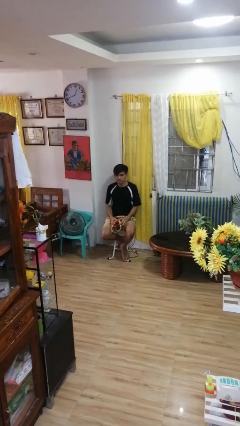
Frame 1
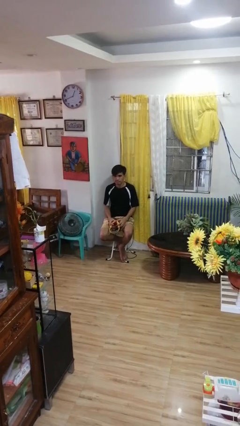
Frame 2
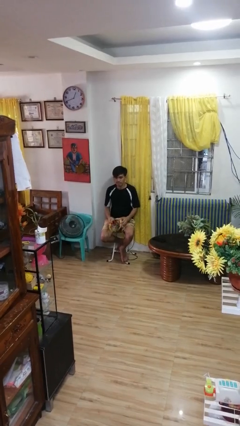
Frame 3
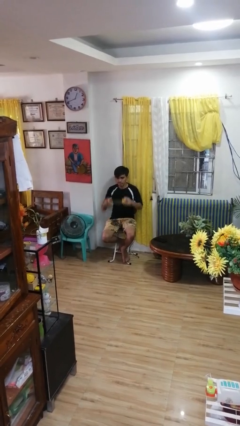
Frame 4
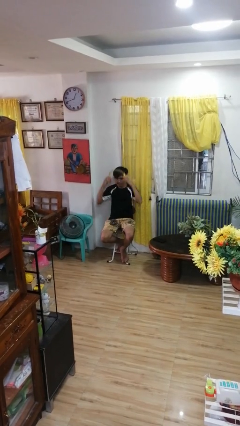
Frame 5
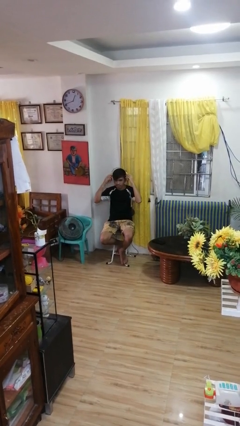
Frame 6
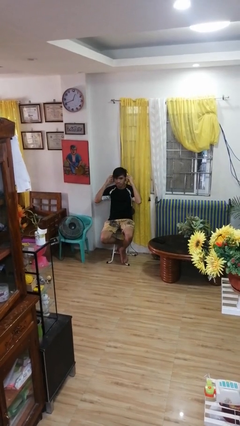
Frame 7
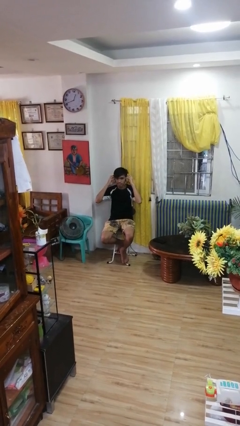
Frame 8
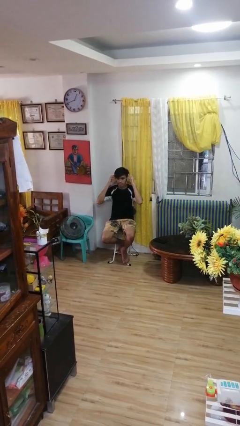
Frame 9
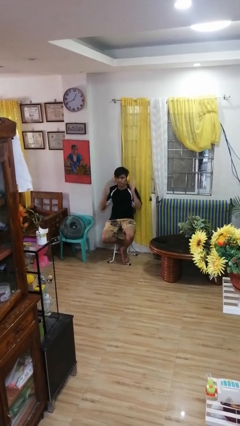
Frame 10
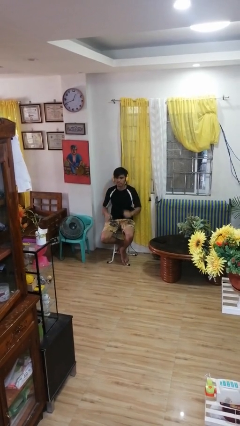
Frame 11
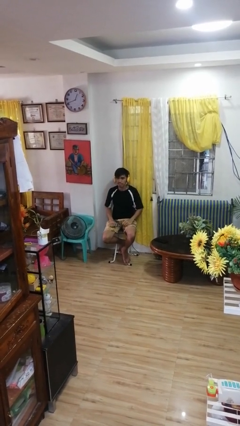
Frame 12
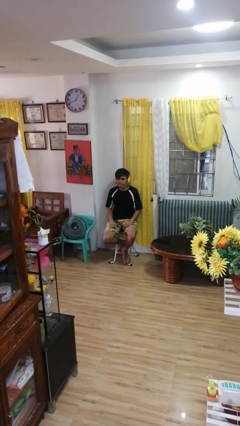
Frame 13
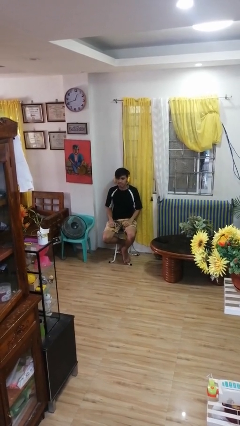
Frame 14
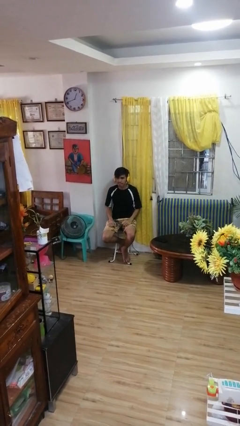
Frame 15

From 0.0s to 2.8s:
person puts on headphones

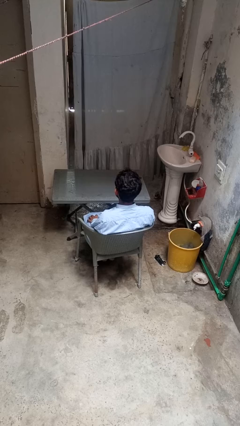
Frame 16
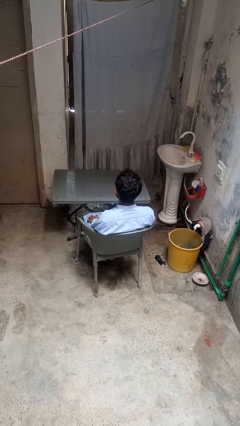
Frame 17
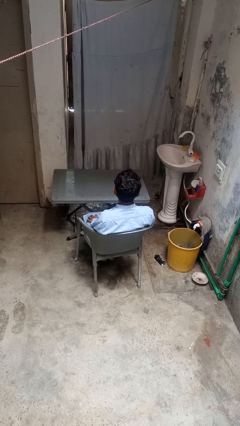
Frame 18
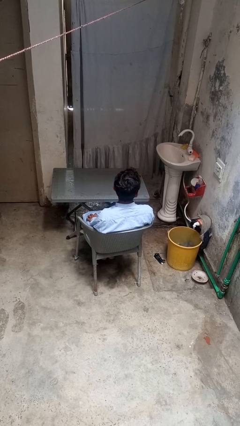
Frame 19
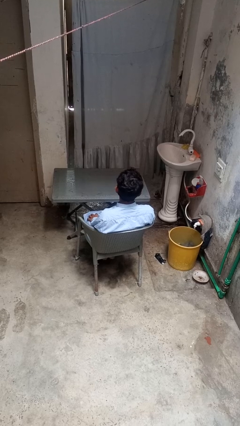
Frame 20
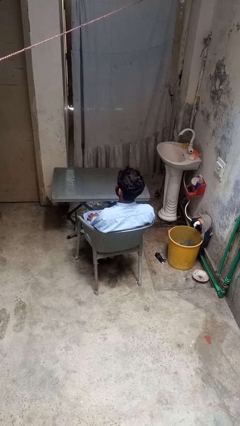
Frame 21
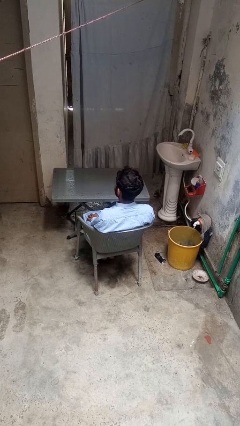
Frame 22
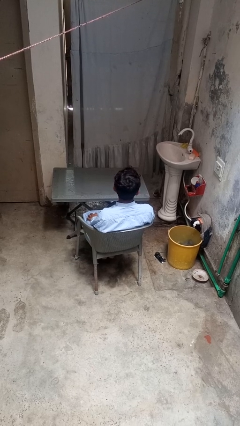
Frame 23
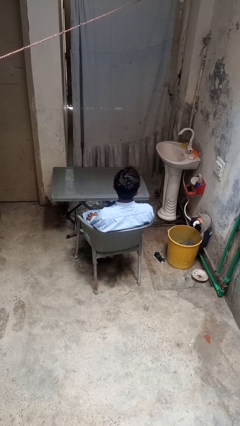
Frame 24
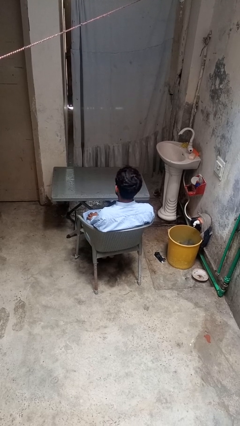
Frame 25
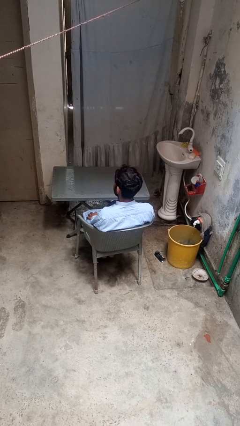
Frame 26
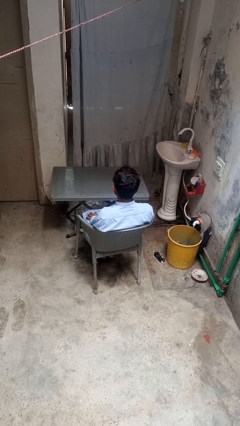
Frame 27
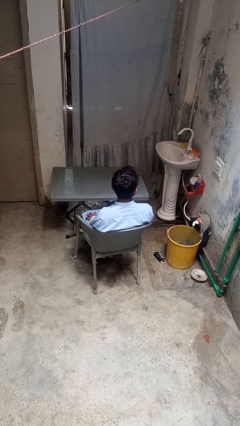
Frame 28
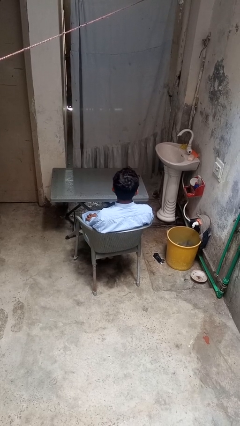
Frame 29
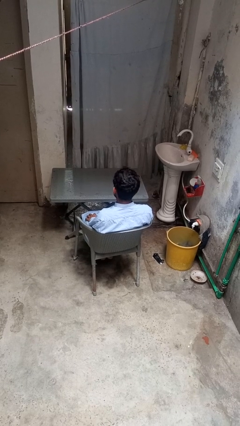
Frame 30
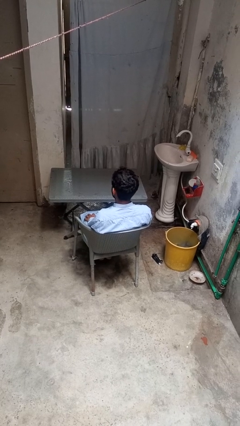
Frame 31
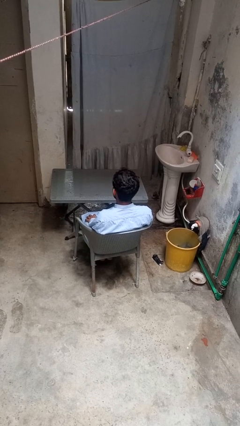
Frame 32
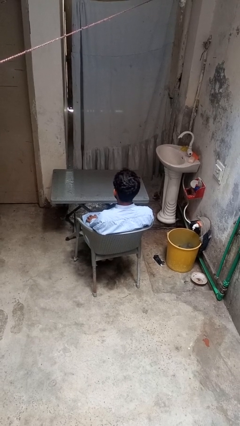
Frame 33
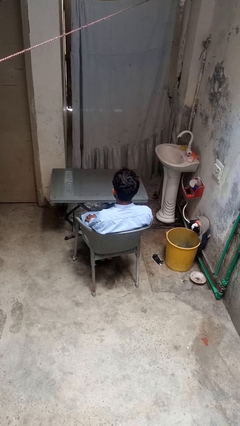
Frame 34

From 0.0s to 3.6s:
person shakes head

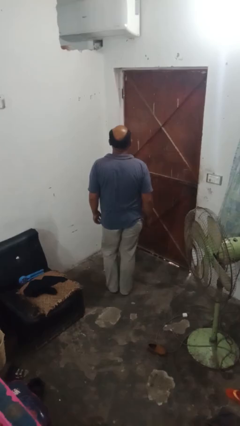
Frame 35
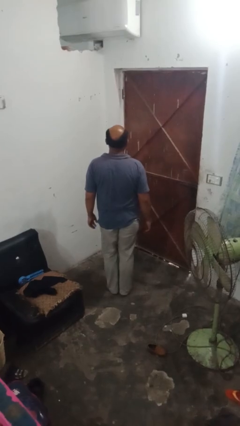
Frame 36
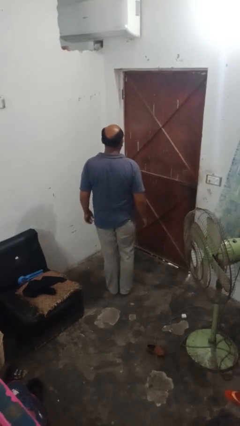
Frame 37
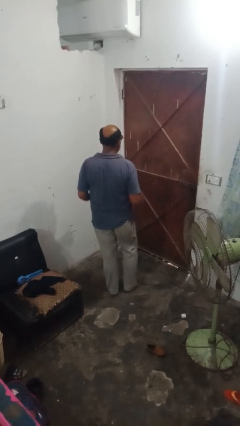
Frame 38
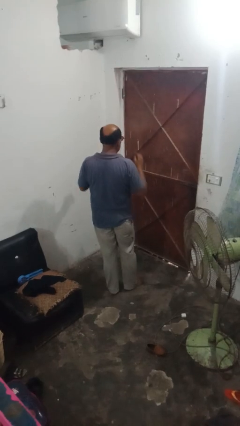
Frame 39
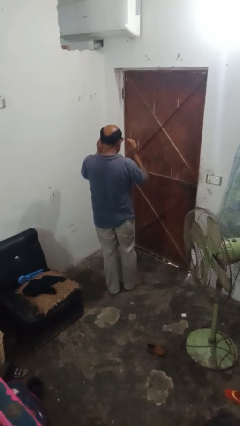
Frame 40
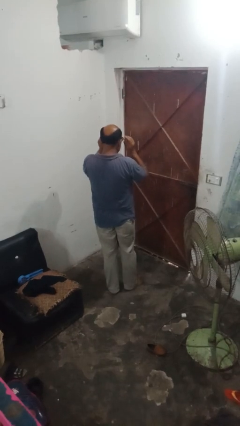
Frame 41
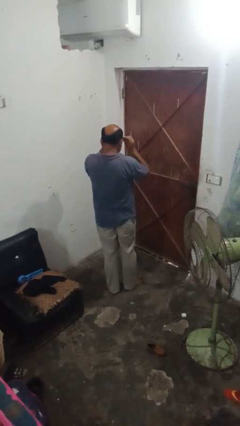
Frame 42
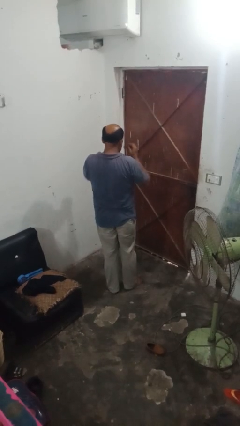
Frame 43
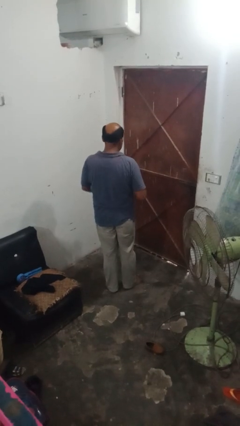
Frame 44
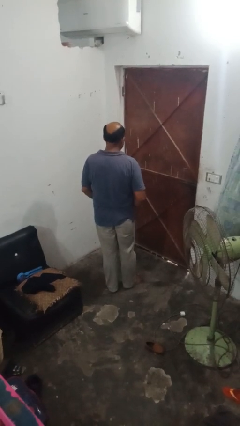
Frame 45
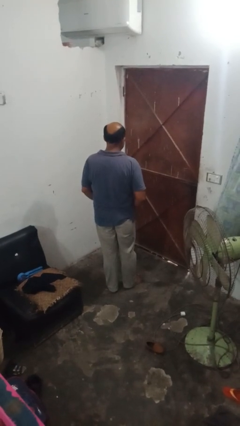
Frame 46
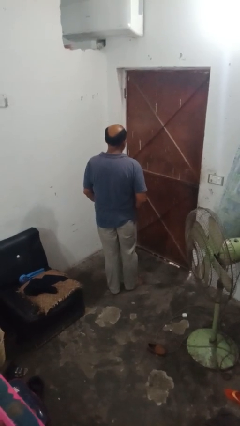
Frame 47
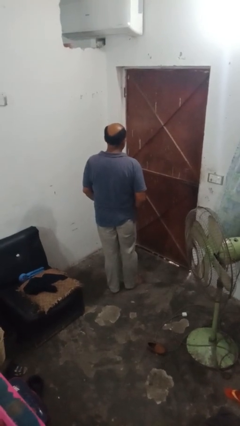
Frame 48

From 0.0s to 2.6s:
person takes off sunglasses

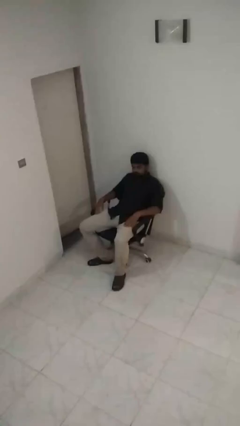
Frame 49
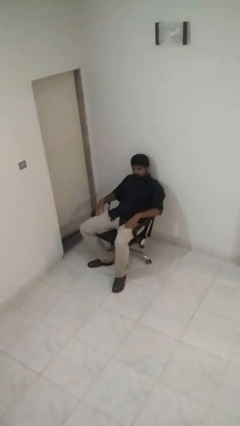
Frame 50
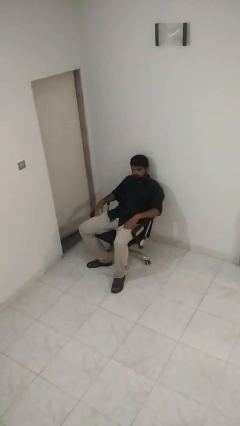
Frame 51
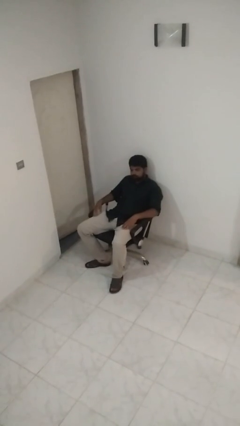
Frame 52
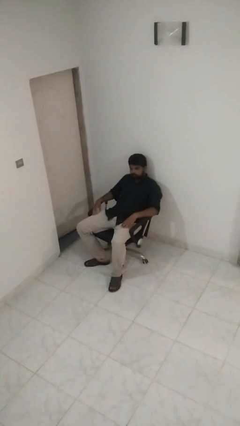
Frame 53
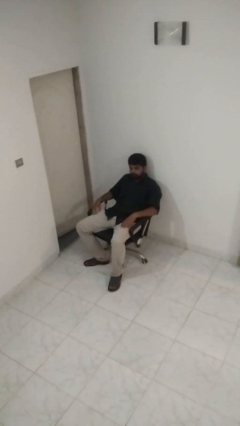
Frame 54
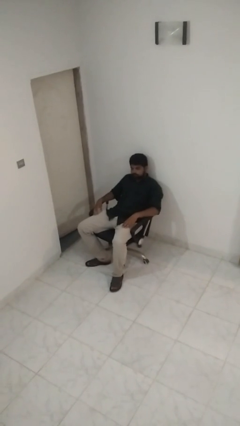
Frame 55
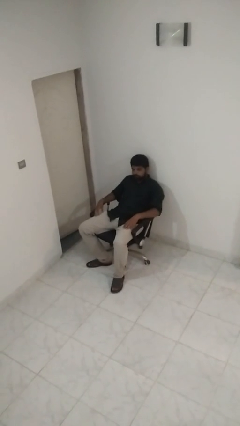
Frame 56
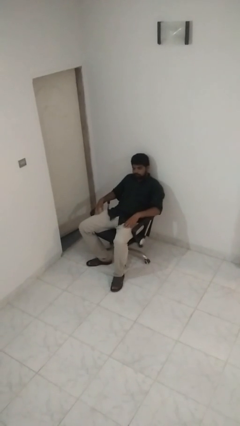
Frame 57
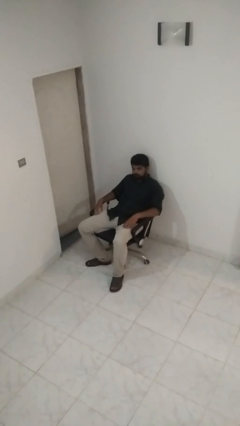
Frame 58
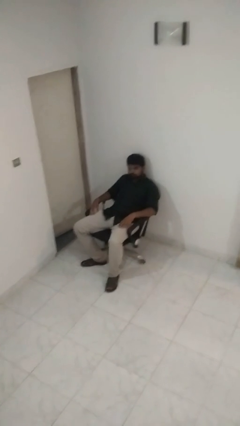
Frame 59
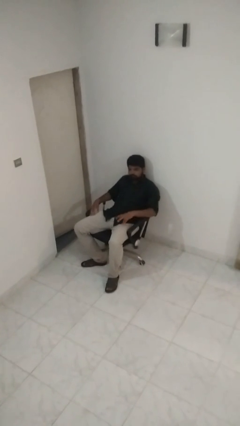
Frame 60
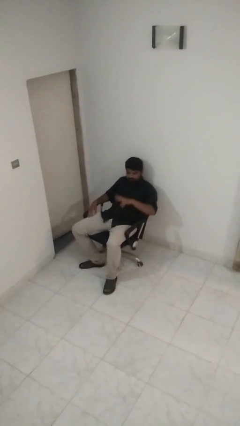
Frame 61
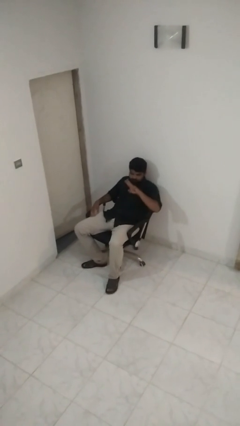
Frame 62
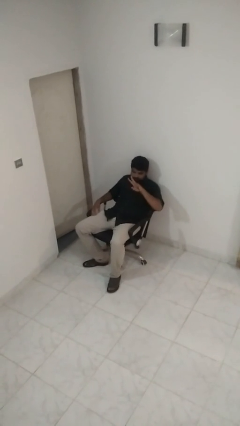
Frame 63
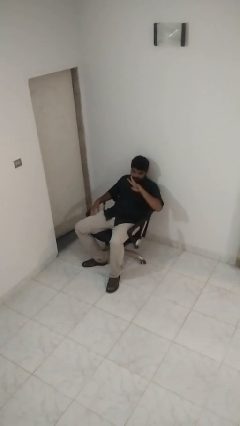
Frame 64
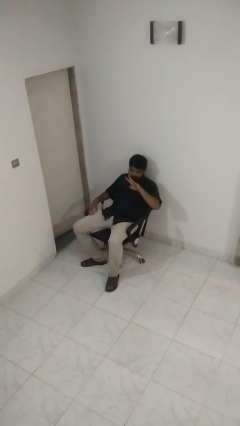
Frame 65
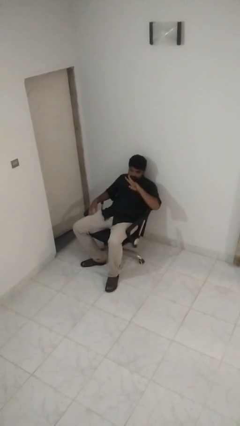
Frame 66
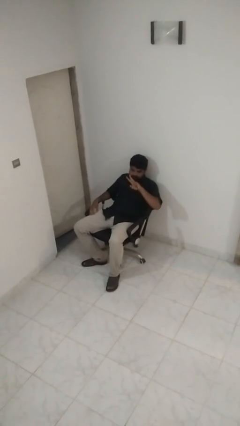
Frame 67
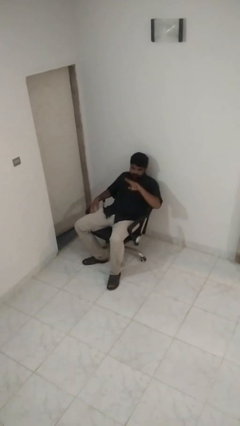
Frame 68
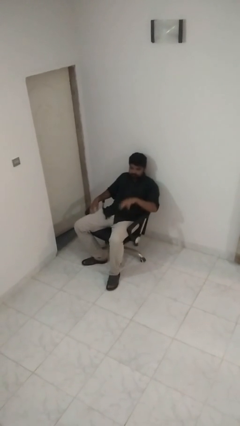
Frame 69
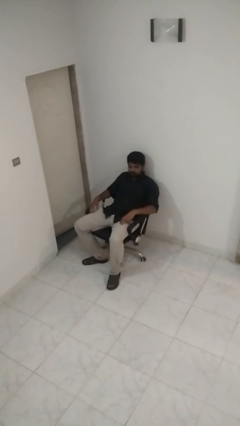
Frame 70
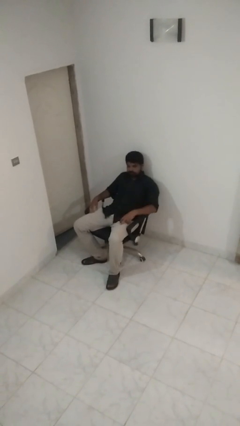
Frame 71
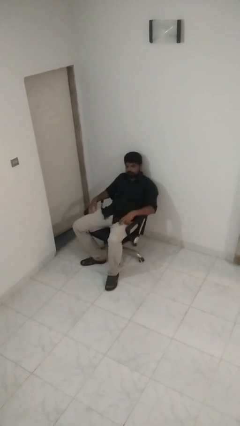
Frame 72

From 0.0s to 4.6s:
person gestures peace

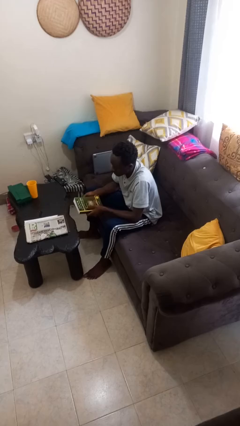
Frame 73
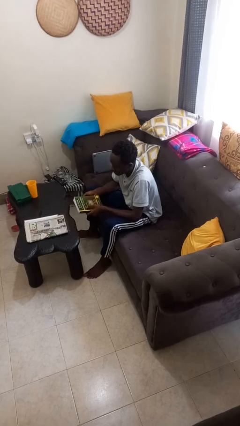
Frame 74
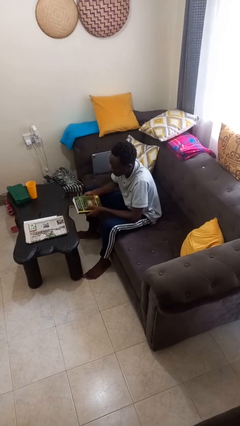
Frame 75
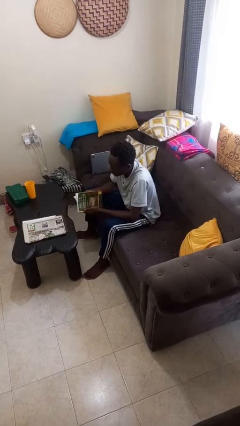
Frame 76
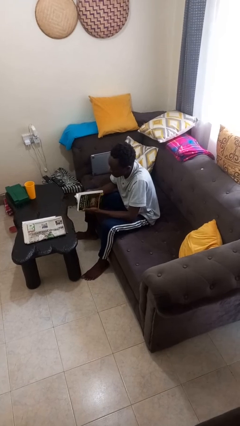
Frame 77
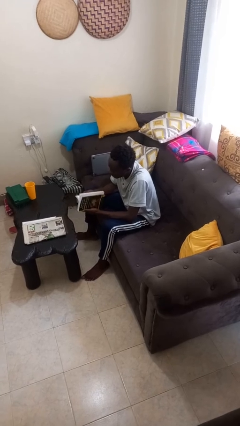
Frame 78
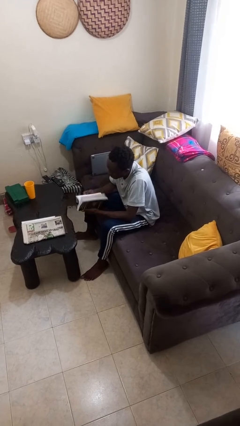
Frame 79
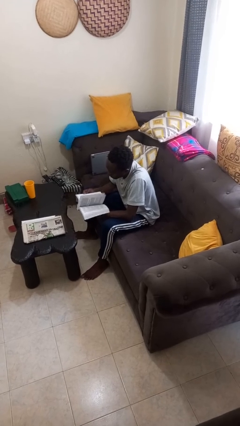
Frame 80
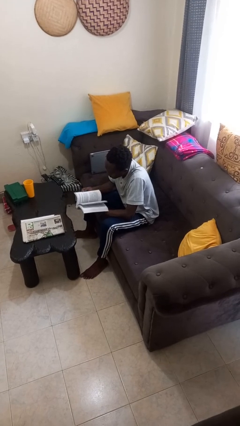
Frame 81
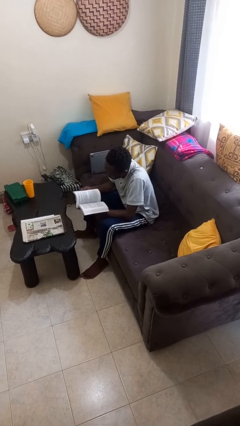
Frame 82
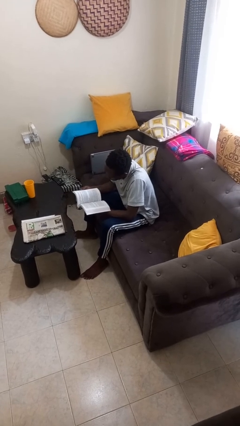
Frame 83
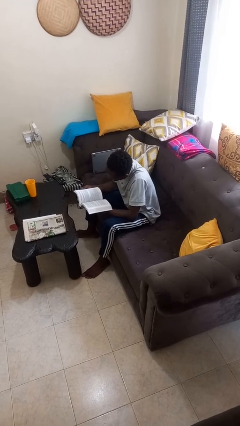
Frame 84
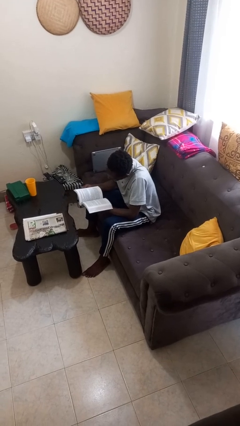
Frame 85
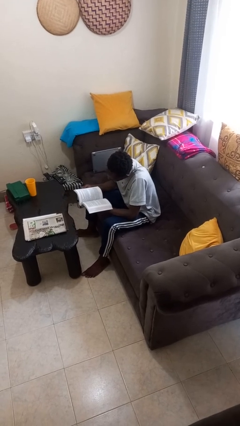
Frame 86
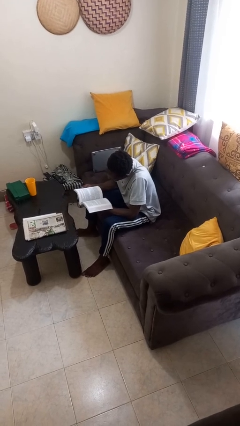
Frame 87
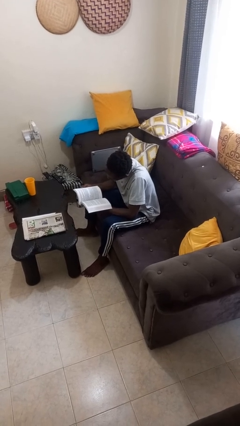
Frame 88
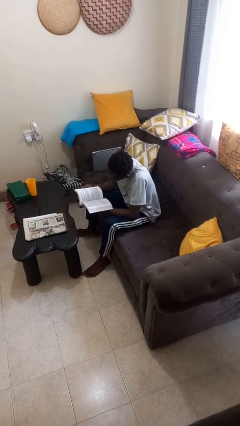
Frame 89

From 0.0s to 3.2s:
person reads book

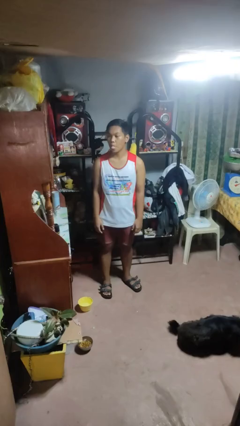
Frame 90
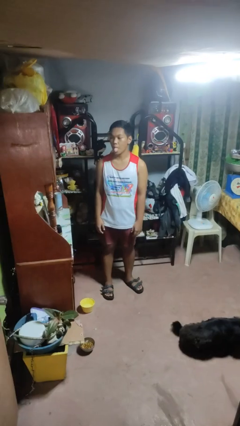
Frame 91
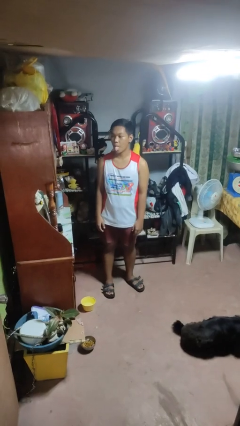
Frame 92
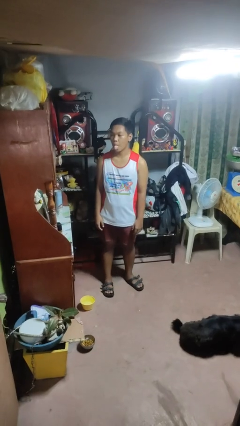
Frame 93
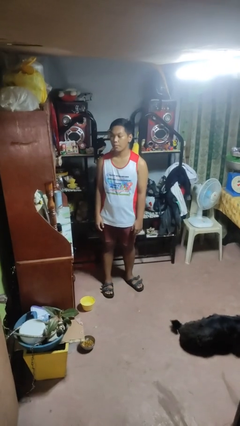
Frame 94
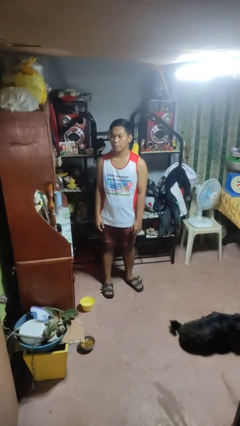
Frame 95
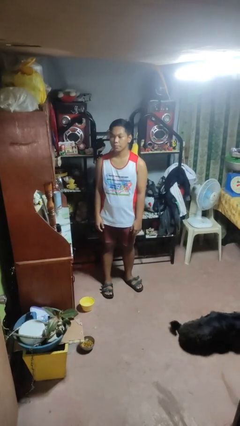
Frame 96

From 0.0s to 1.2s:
person sticks out tongue
